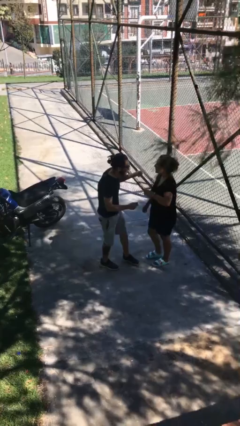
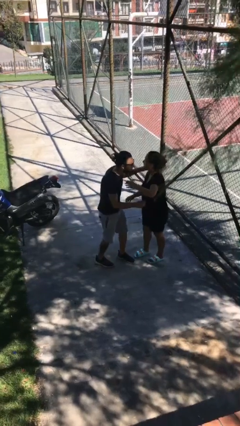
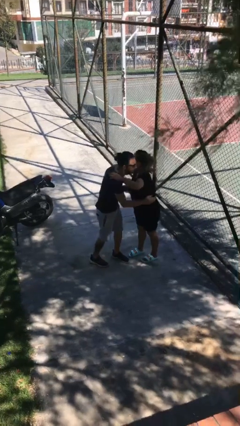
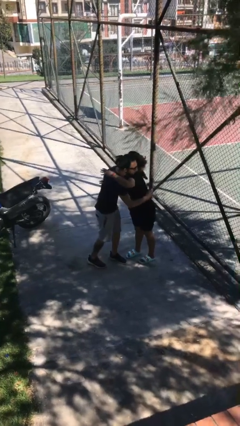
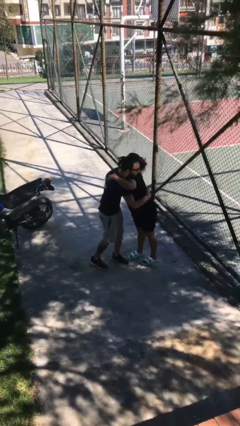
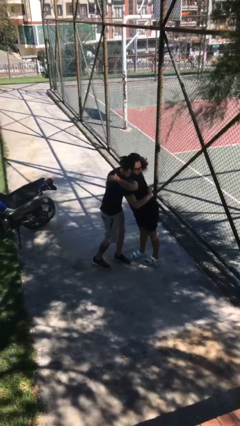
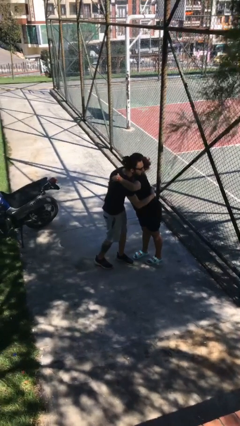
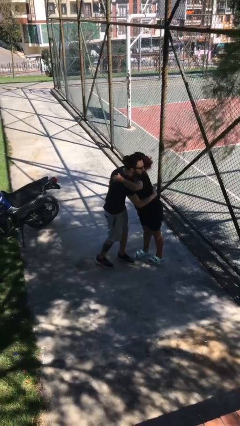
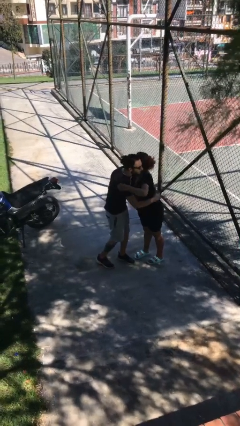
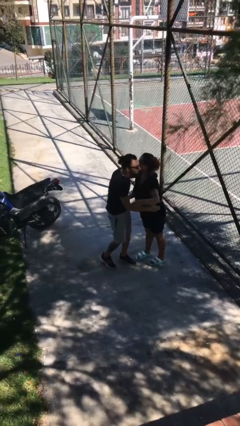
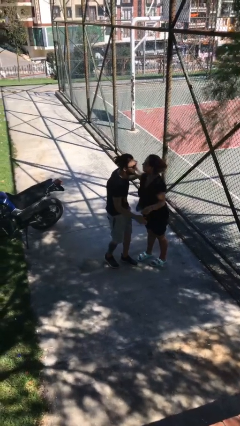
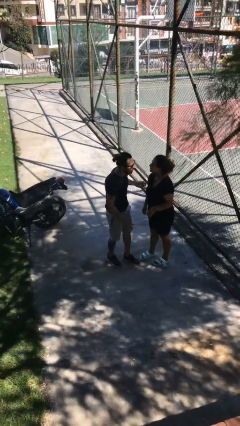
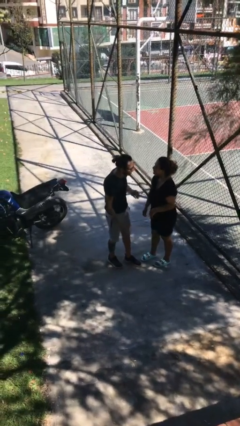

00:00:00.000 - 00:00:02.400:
person embraces person

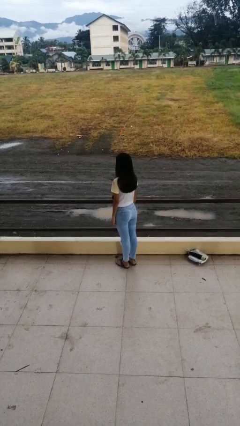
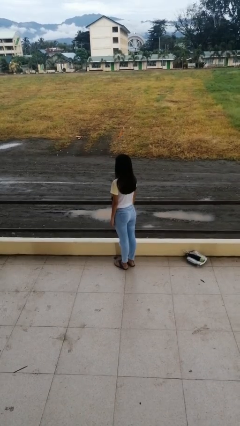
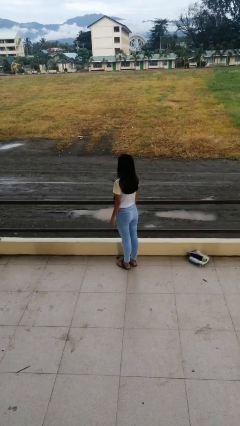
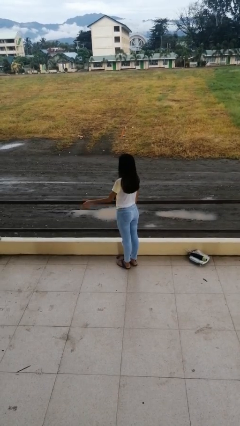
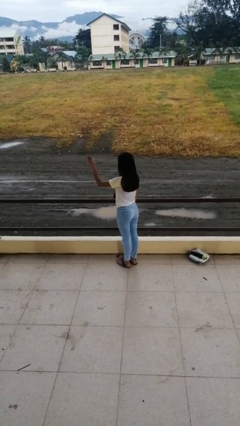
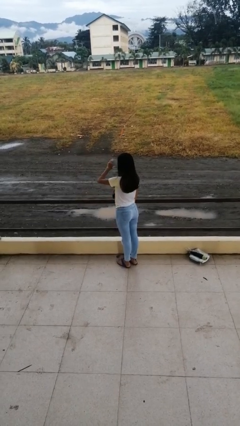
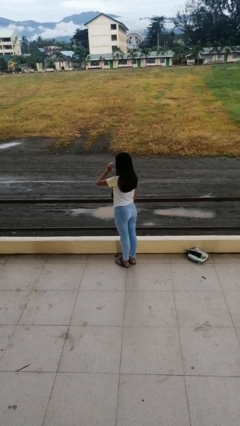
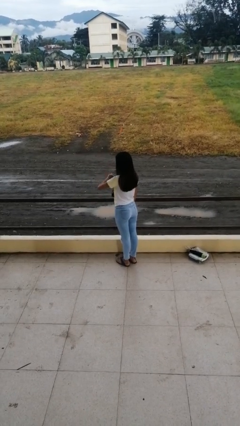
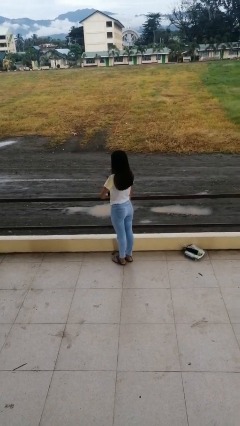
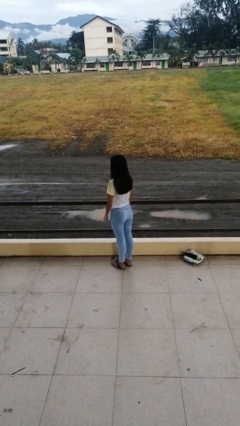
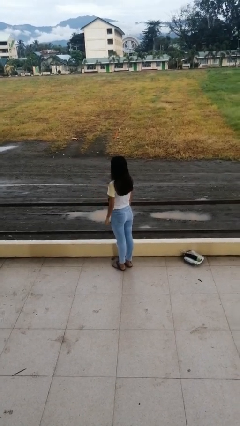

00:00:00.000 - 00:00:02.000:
person gestures swipe right

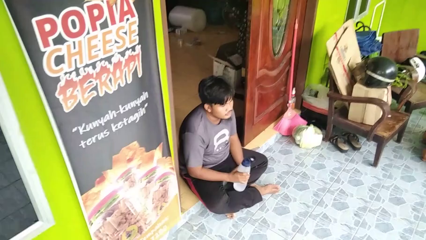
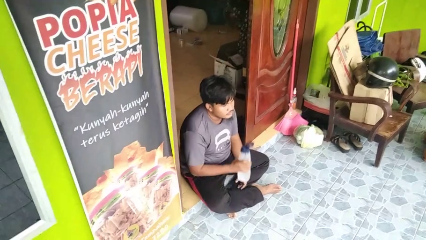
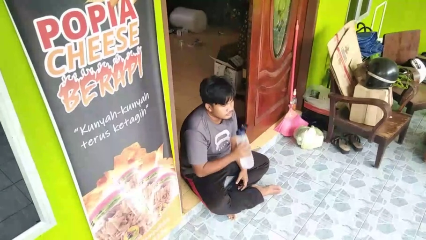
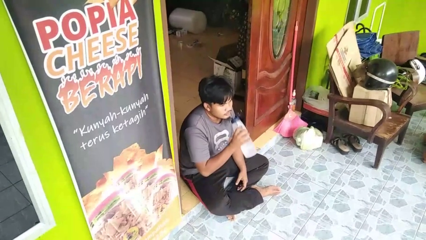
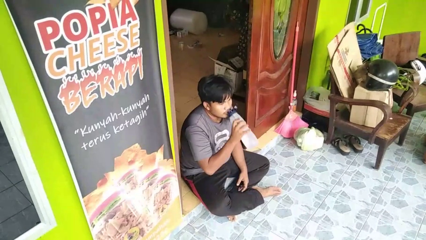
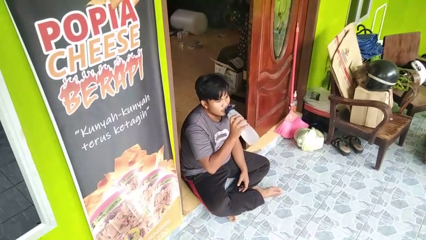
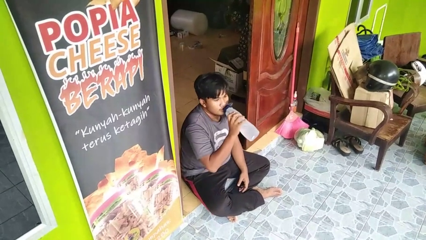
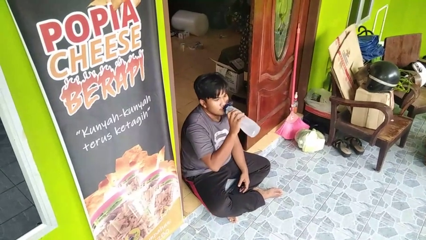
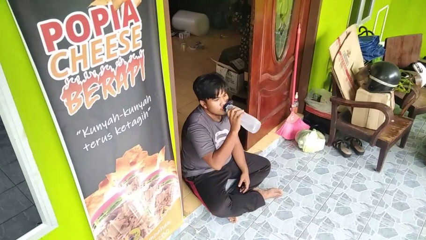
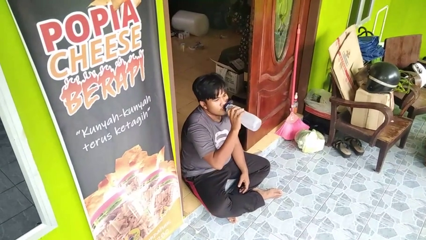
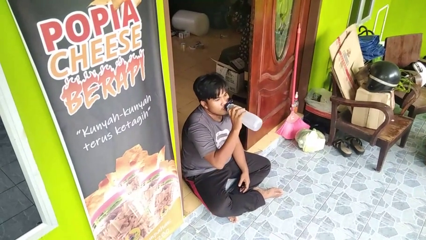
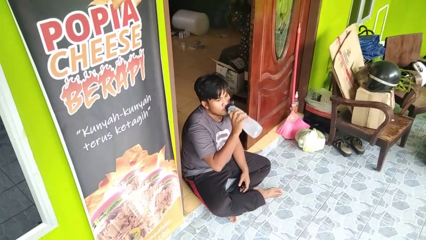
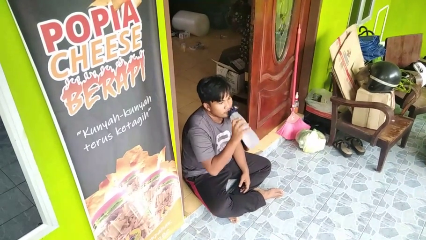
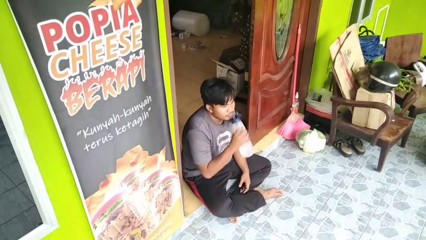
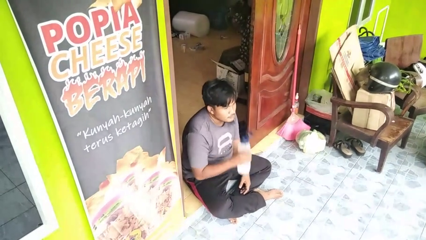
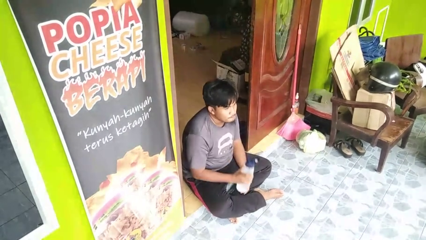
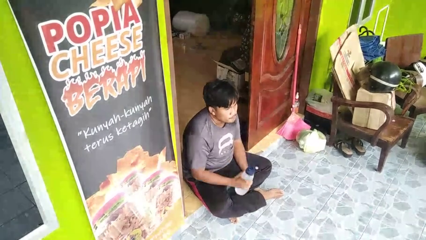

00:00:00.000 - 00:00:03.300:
person drinks from bottle

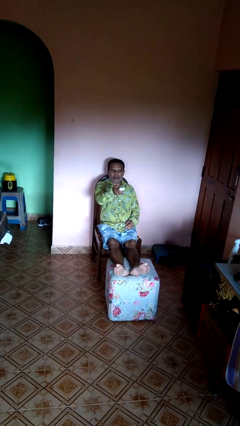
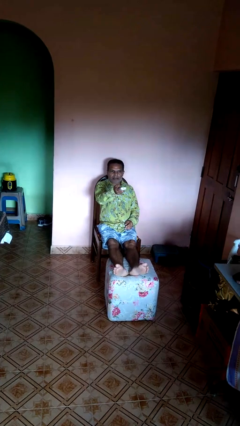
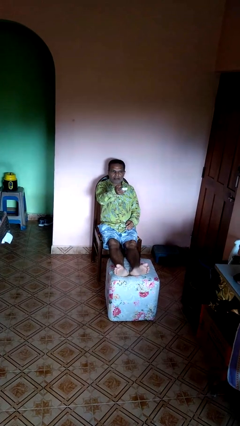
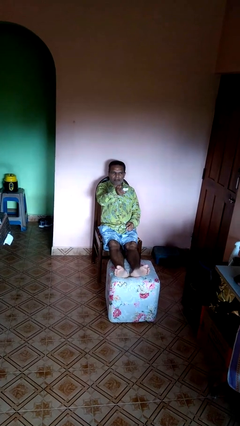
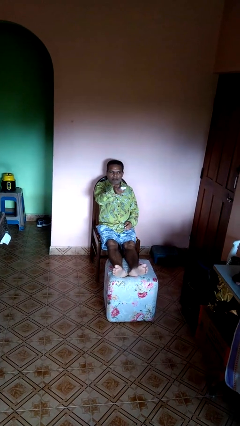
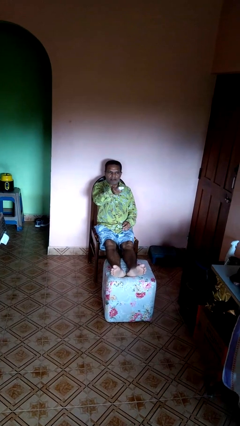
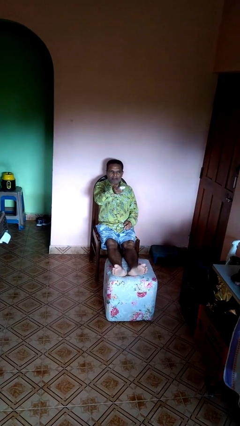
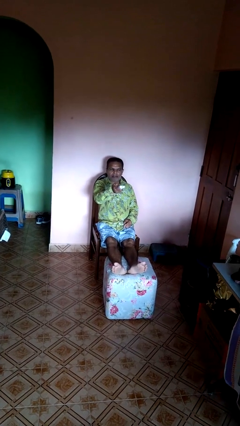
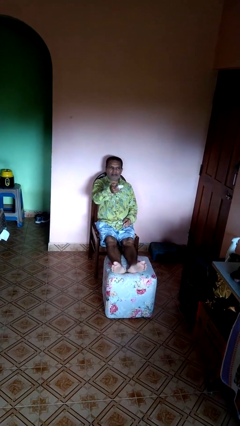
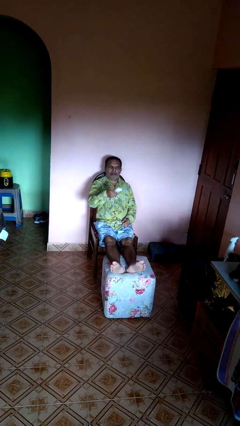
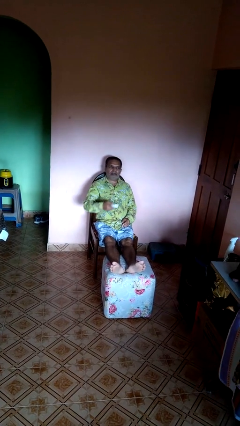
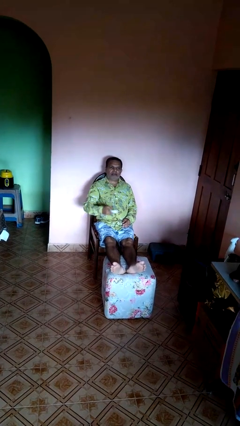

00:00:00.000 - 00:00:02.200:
person uses television remote

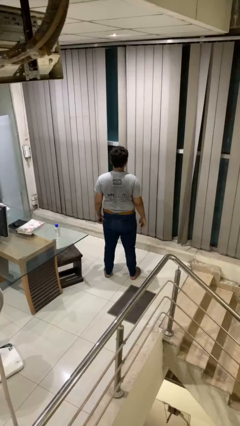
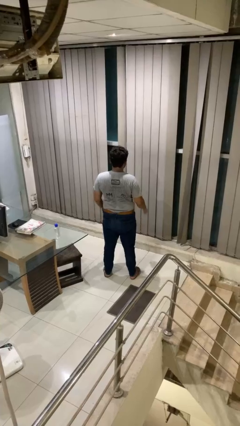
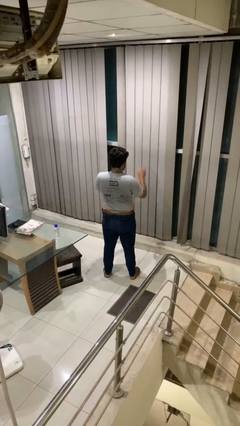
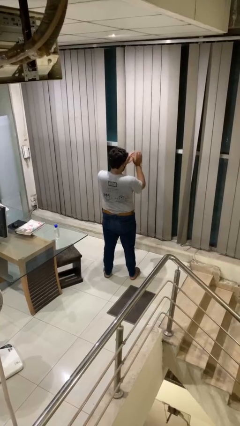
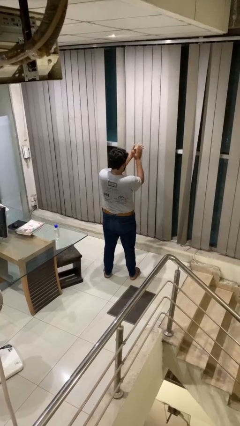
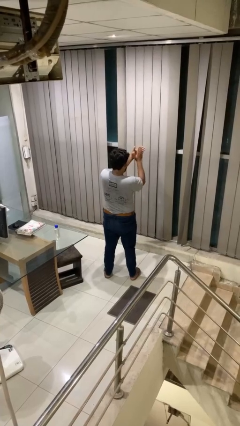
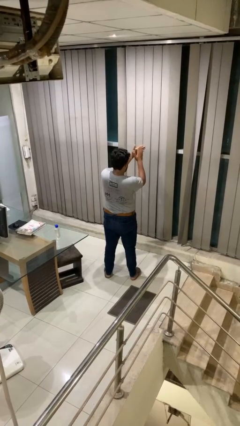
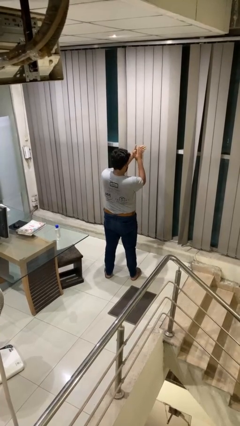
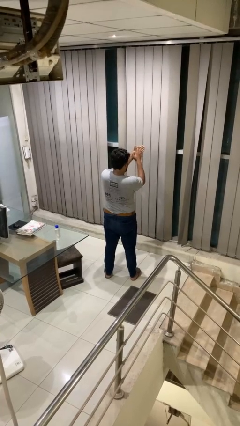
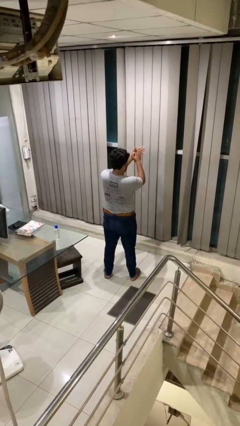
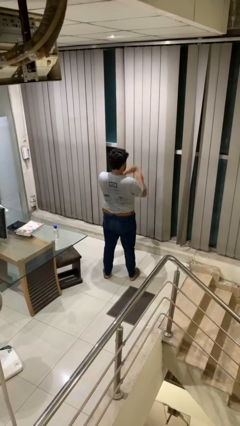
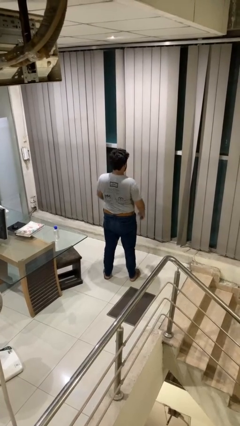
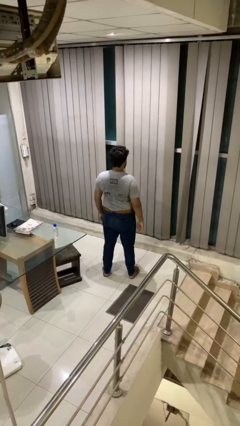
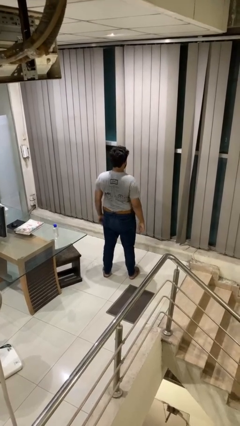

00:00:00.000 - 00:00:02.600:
person claps hands

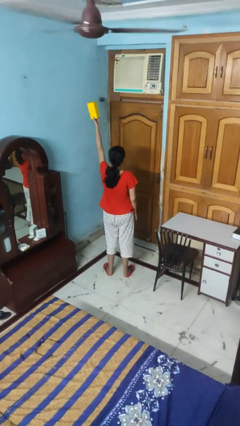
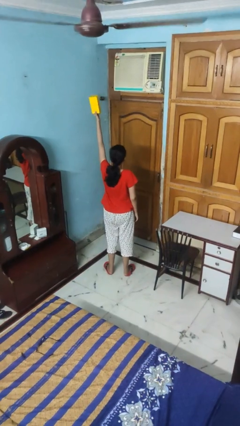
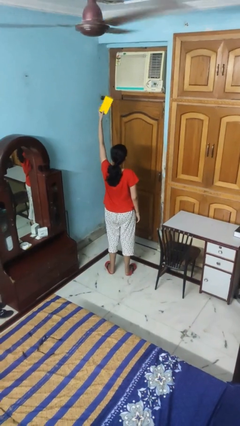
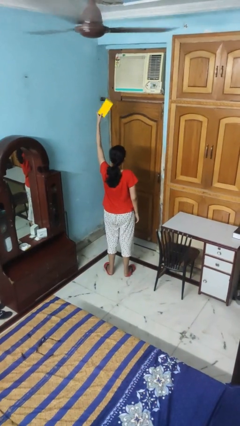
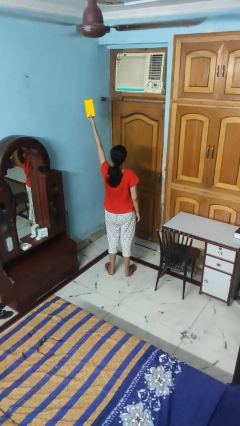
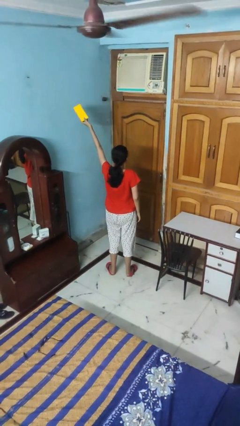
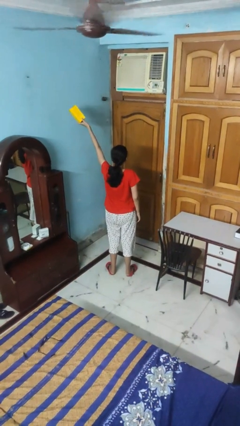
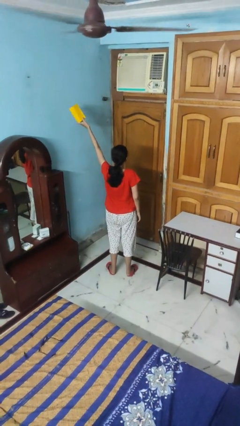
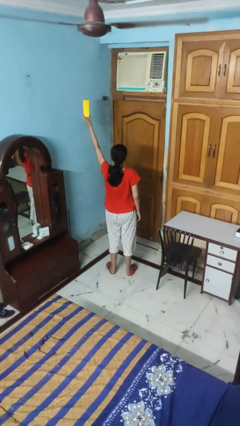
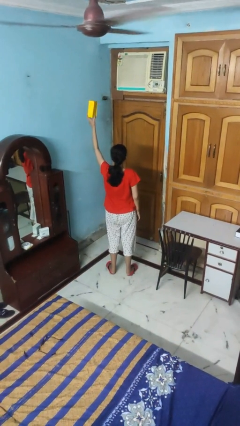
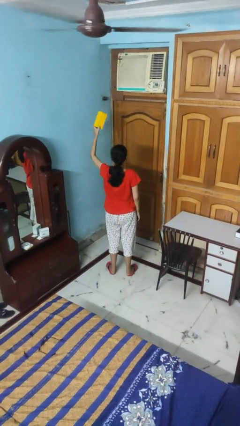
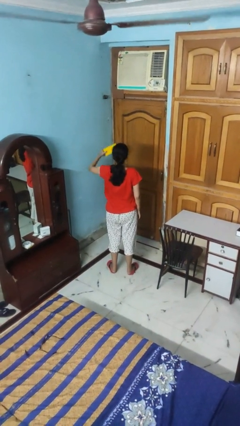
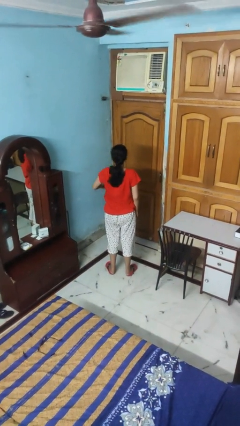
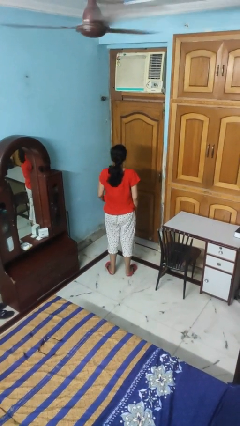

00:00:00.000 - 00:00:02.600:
person holds object above head

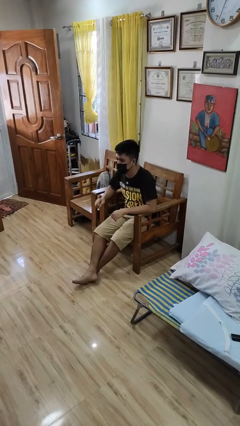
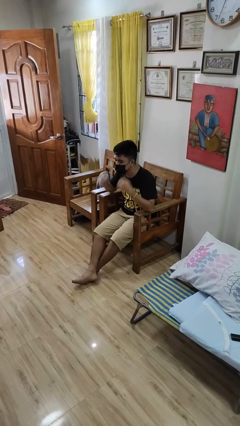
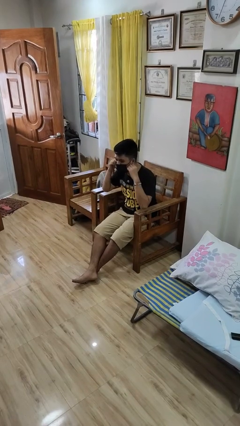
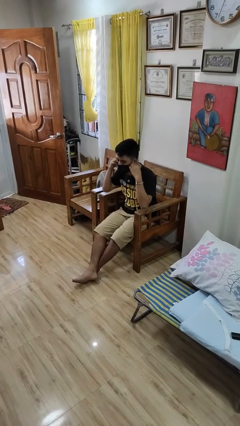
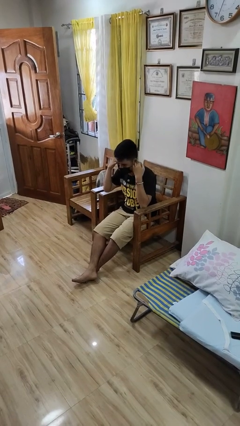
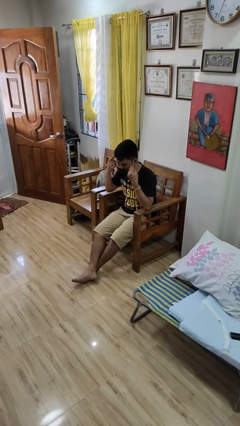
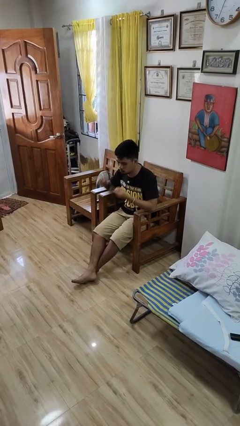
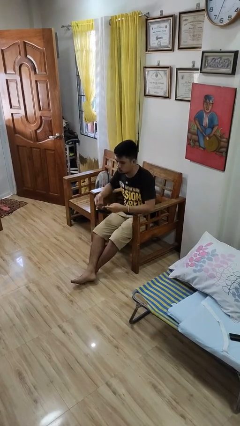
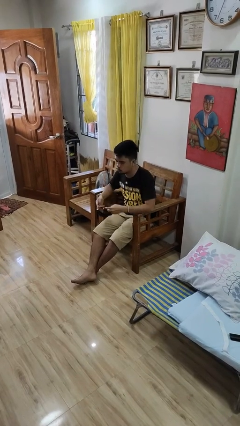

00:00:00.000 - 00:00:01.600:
person takes off facemask

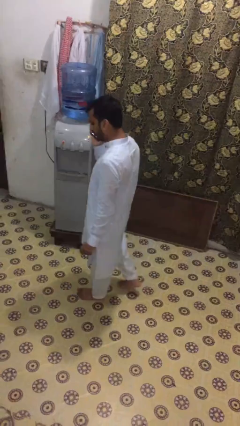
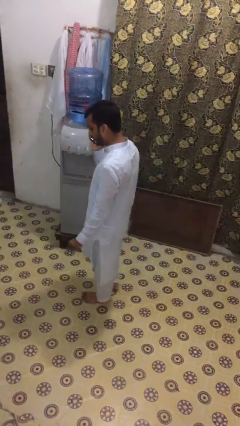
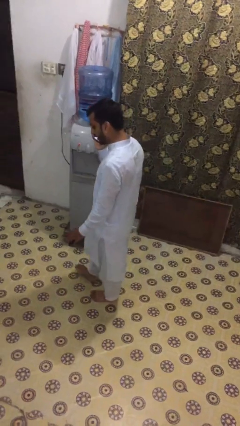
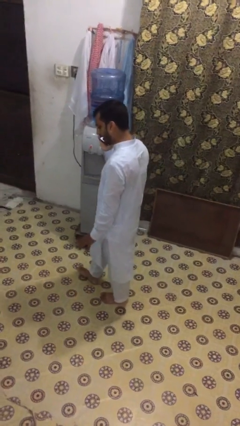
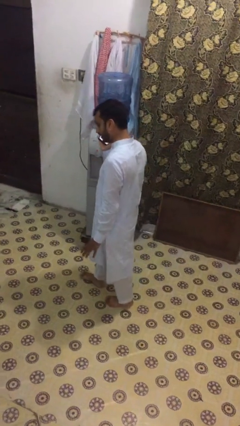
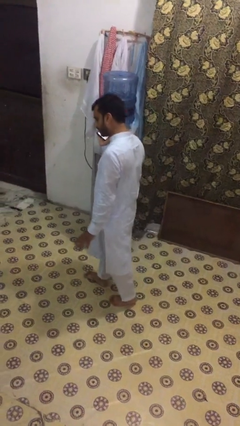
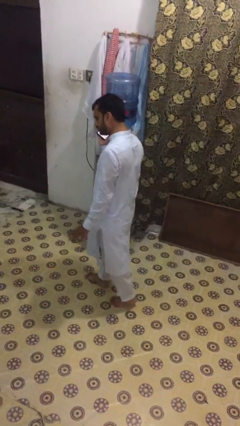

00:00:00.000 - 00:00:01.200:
person talks on phone
